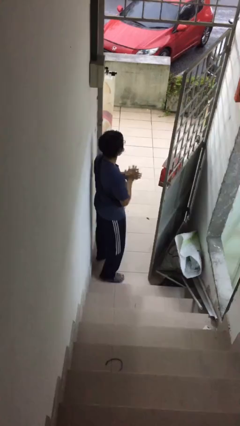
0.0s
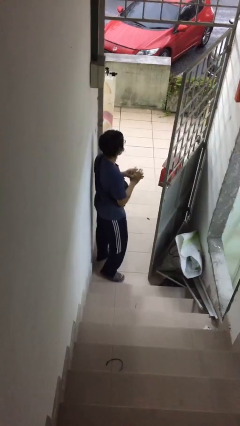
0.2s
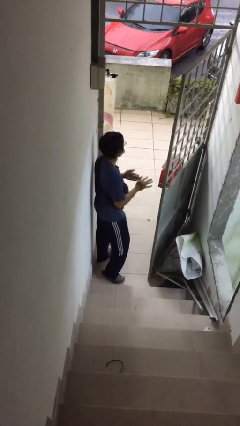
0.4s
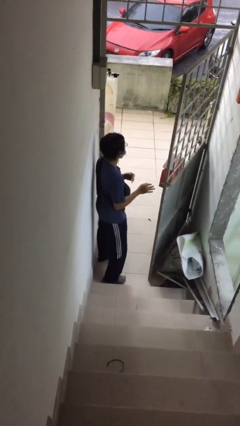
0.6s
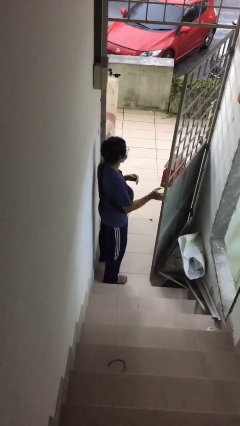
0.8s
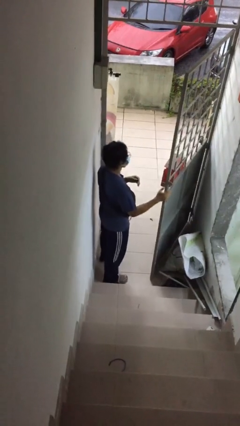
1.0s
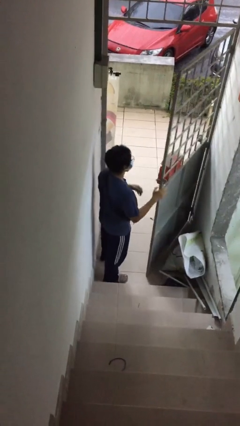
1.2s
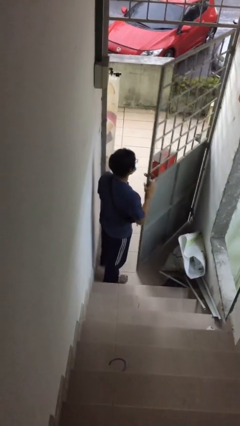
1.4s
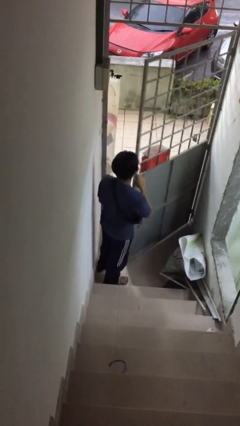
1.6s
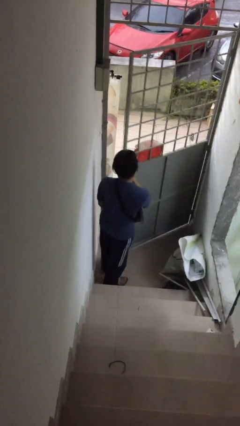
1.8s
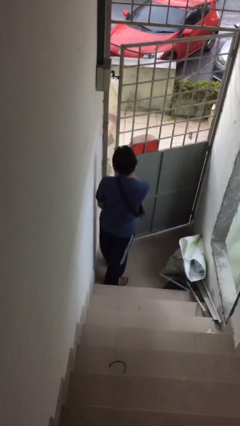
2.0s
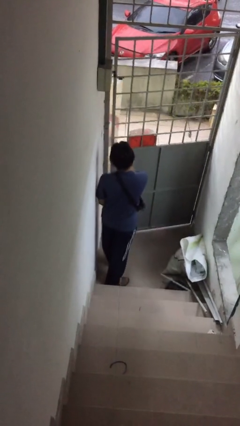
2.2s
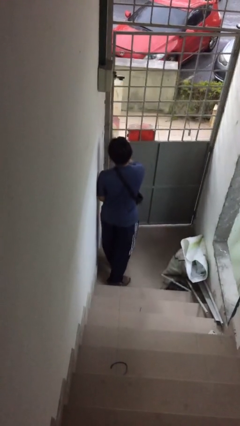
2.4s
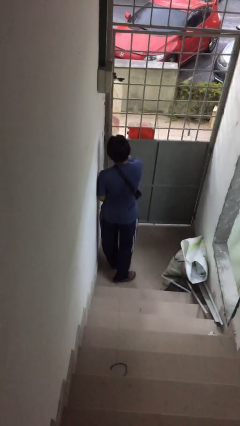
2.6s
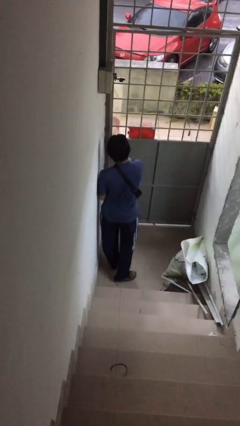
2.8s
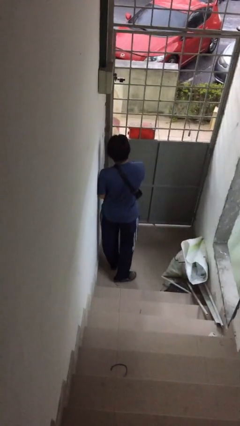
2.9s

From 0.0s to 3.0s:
person closes facility door

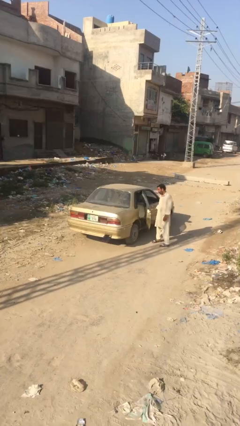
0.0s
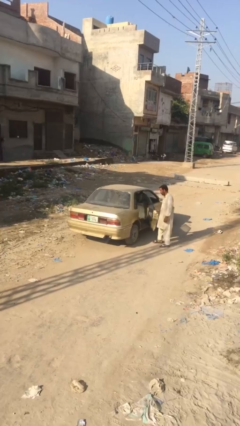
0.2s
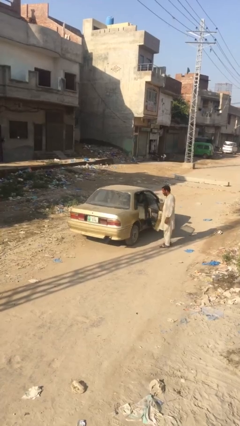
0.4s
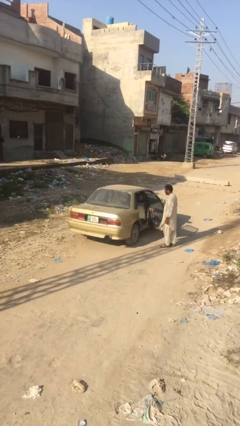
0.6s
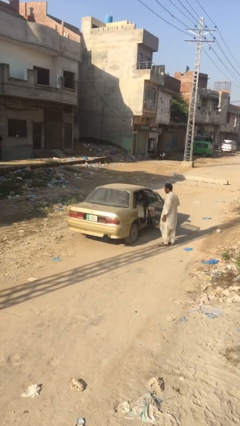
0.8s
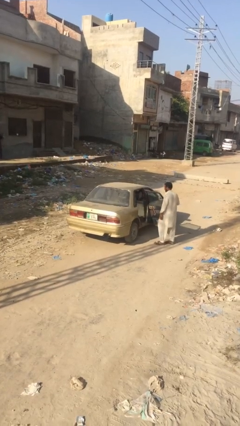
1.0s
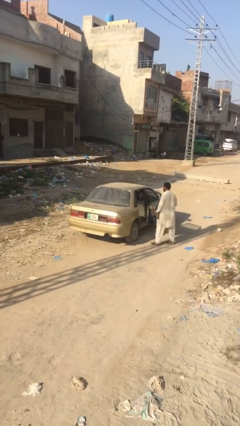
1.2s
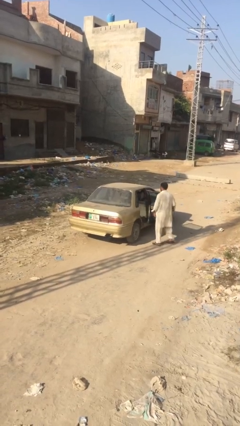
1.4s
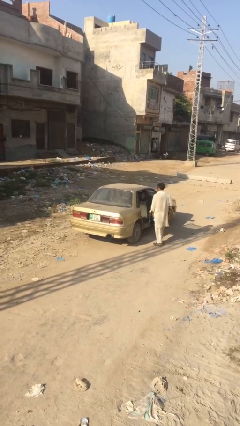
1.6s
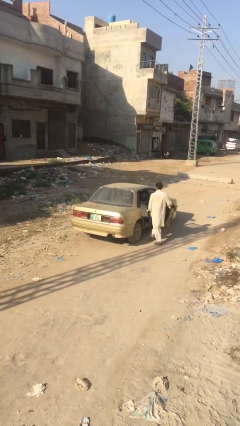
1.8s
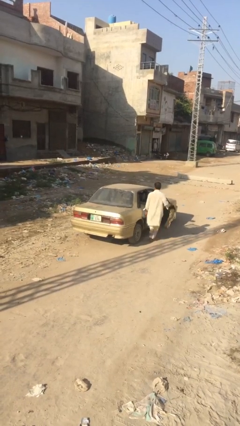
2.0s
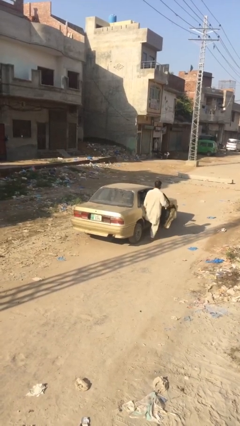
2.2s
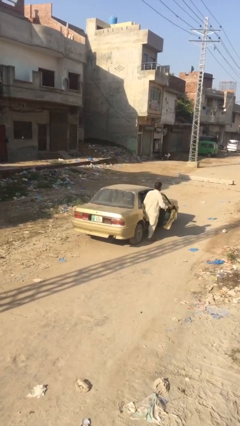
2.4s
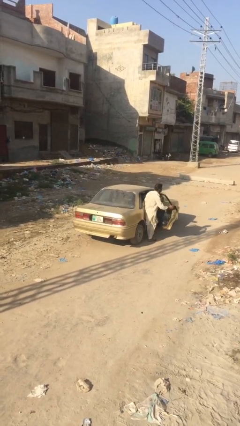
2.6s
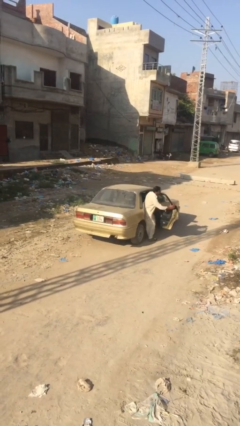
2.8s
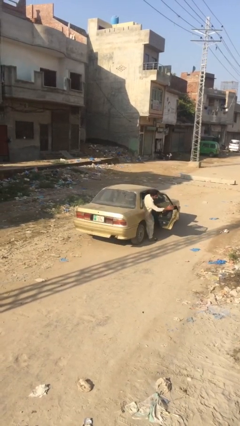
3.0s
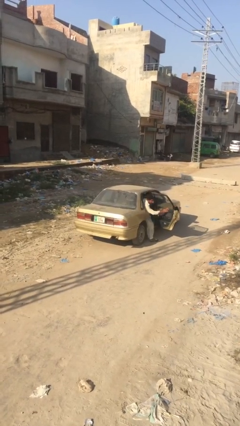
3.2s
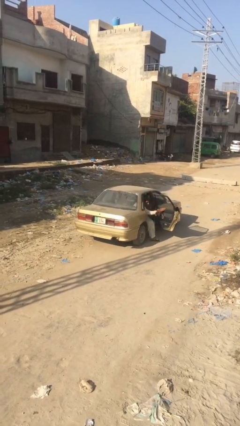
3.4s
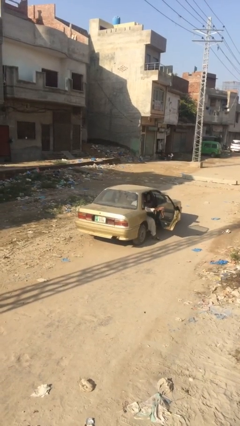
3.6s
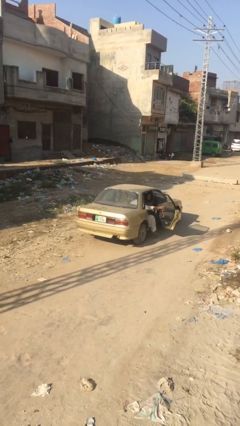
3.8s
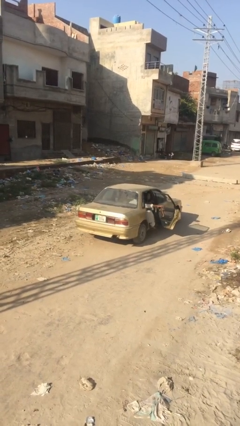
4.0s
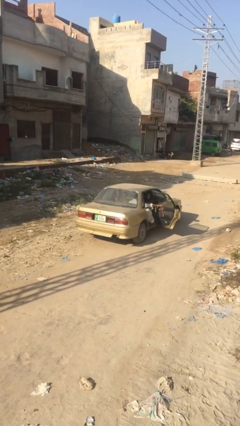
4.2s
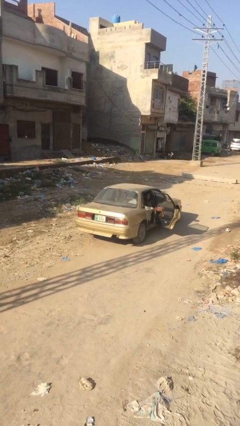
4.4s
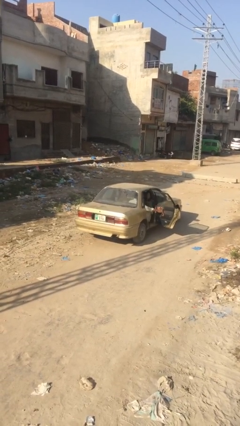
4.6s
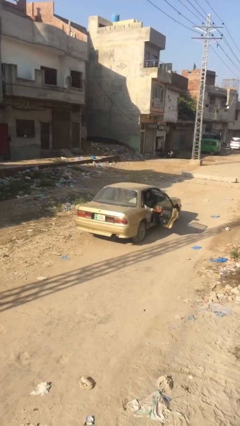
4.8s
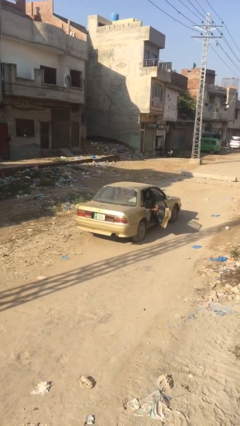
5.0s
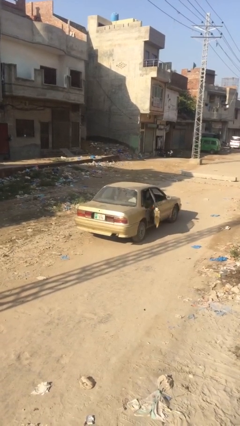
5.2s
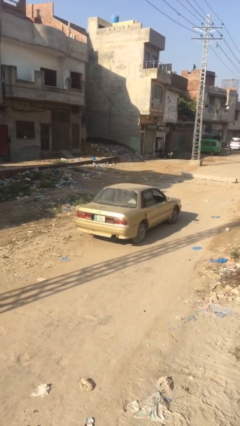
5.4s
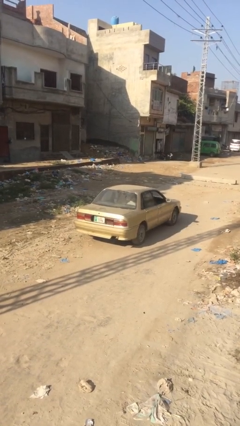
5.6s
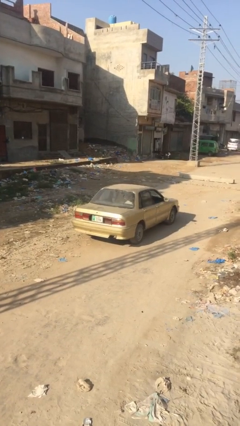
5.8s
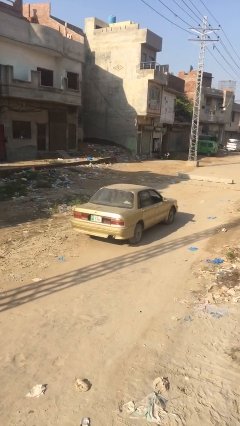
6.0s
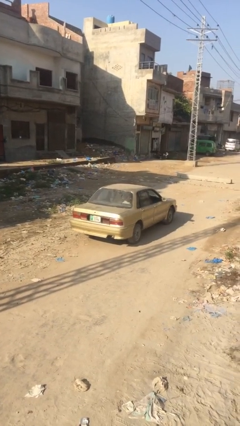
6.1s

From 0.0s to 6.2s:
car picks up person

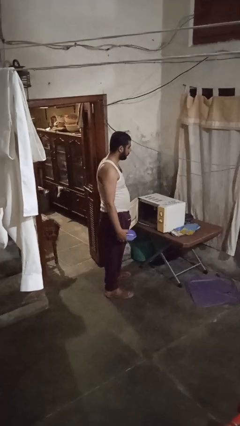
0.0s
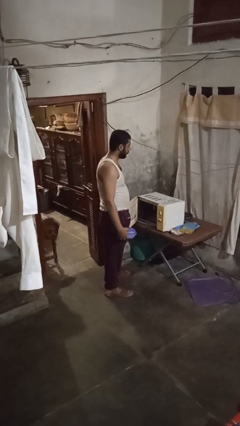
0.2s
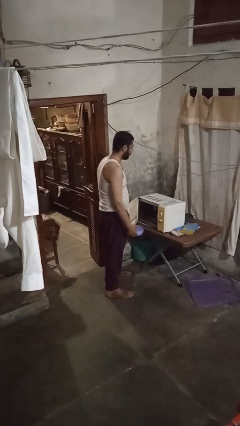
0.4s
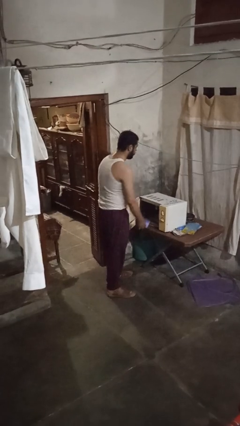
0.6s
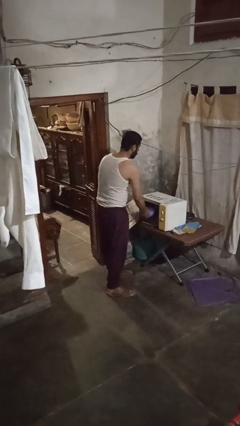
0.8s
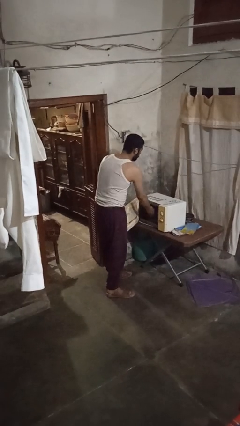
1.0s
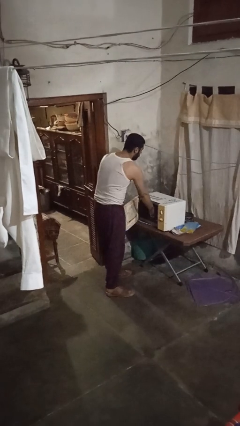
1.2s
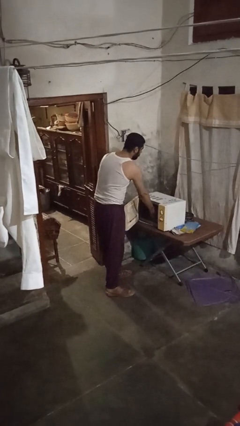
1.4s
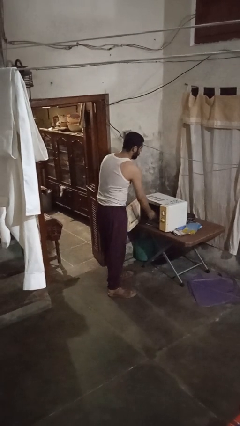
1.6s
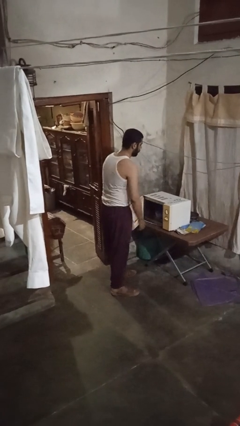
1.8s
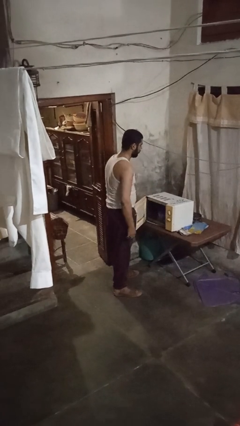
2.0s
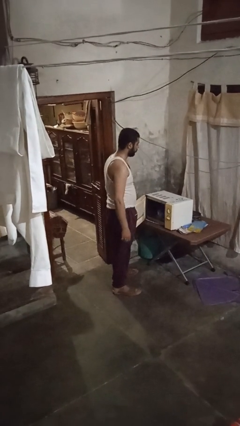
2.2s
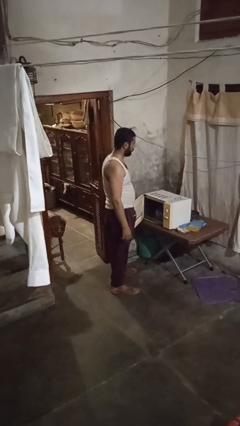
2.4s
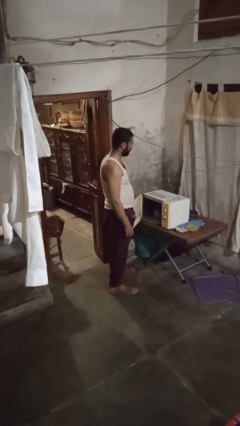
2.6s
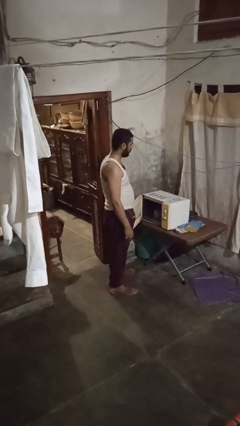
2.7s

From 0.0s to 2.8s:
person puts object into microwave

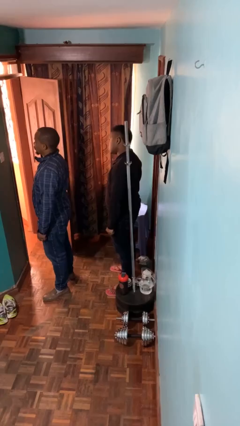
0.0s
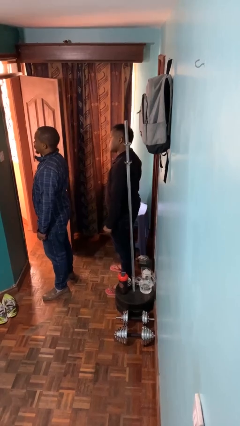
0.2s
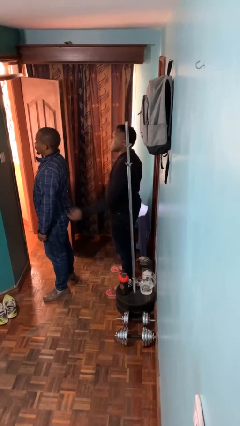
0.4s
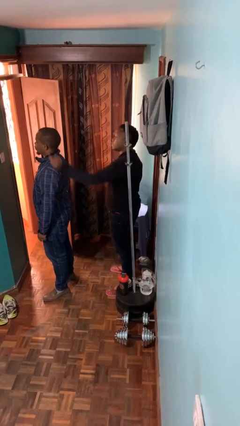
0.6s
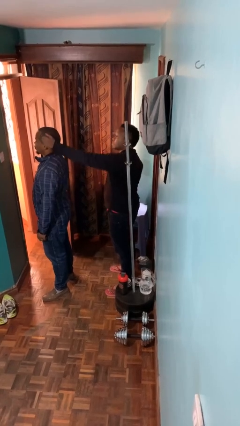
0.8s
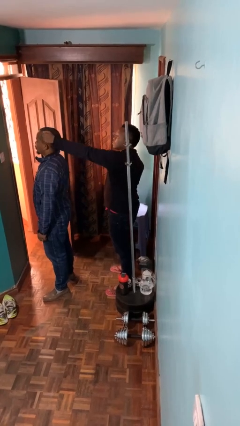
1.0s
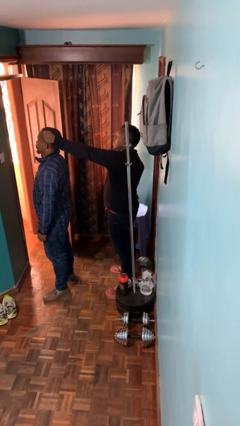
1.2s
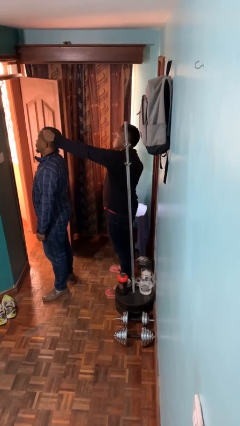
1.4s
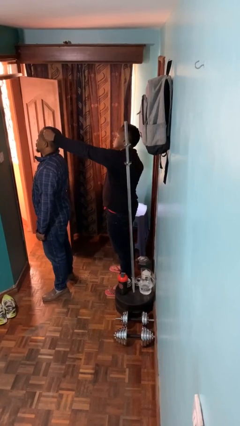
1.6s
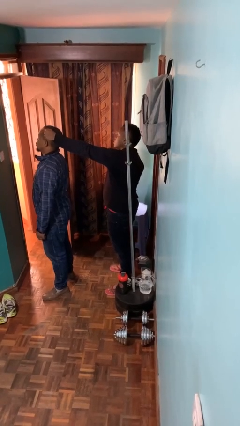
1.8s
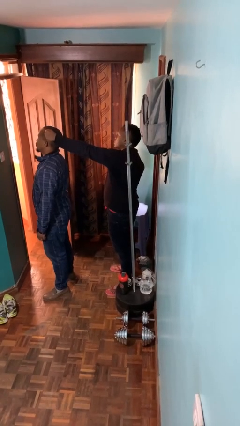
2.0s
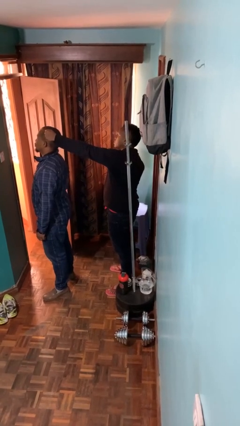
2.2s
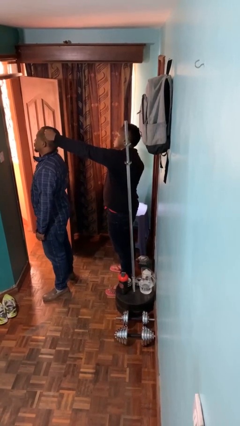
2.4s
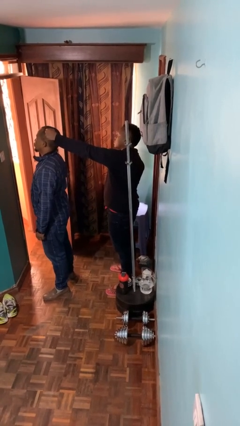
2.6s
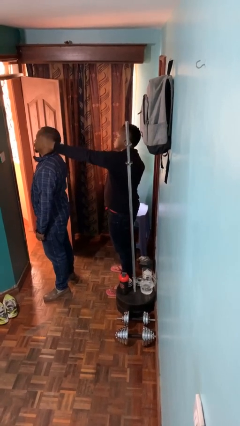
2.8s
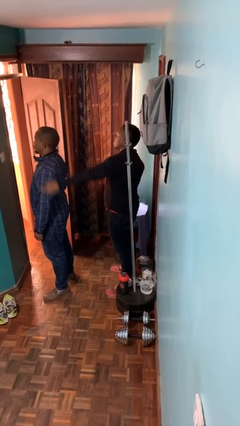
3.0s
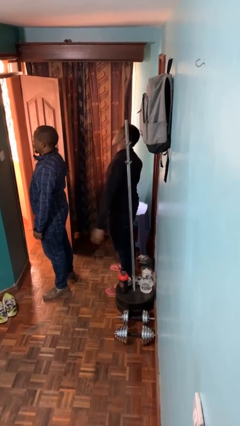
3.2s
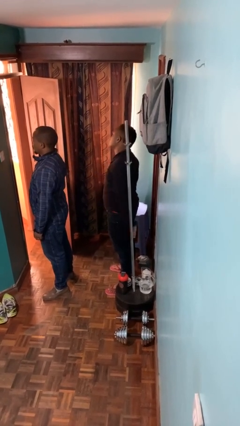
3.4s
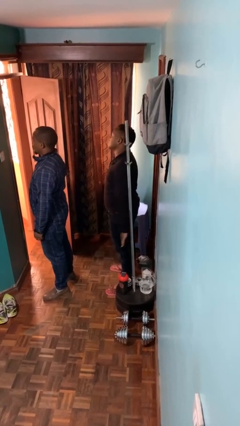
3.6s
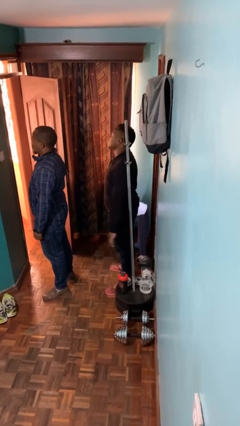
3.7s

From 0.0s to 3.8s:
person grabs person by hair

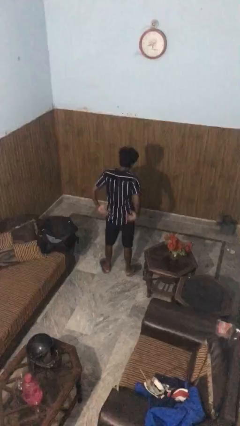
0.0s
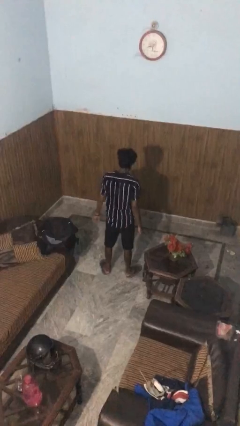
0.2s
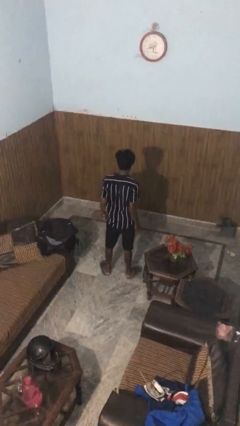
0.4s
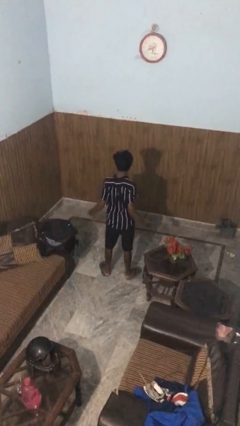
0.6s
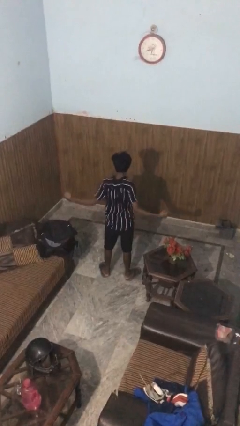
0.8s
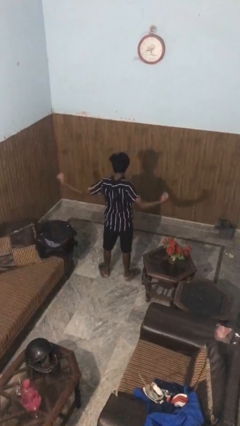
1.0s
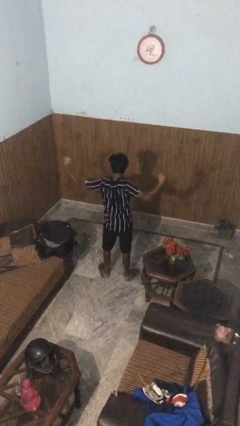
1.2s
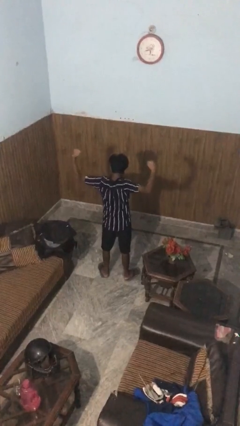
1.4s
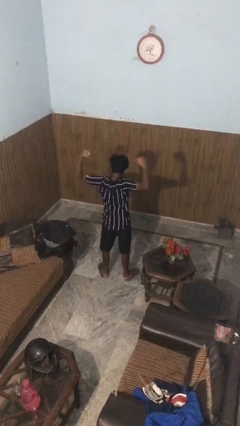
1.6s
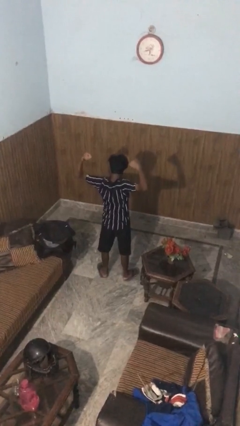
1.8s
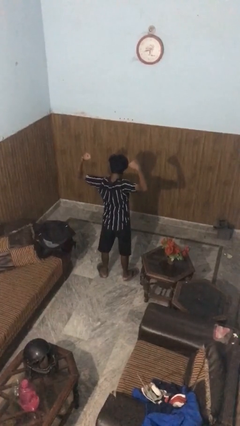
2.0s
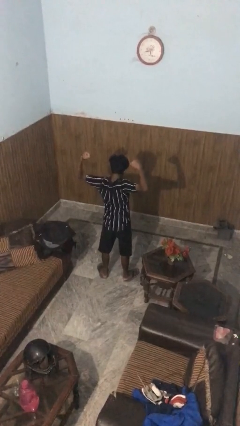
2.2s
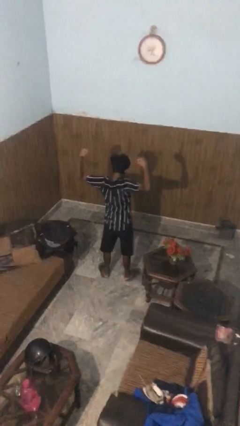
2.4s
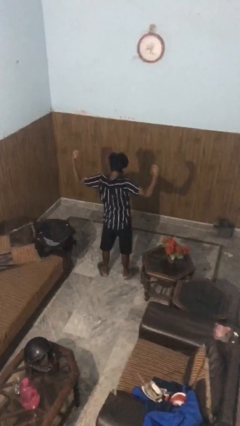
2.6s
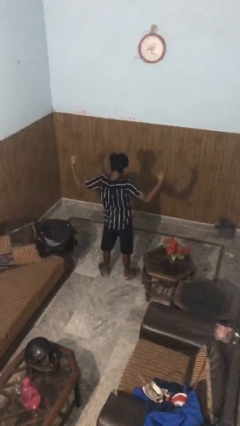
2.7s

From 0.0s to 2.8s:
person stretches arms to side
